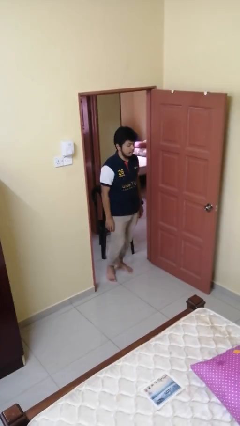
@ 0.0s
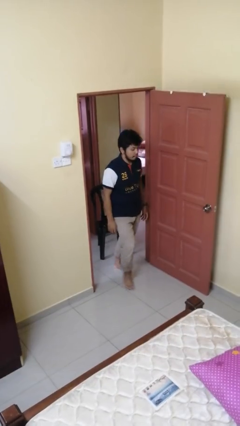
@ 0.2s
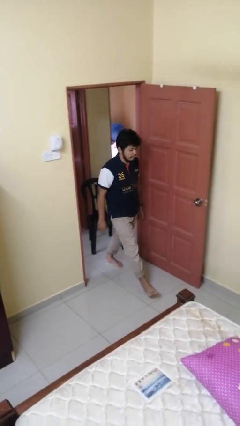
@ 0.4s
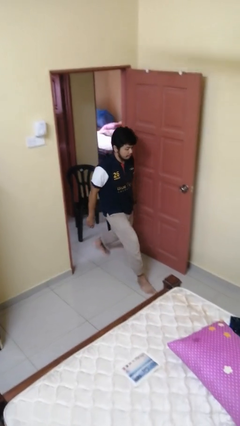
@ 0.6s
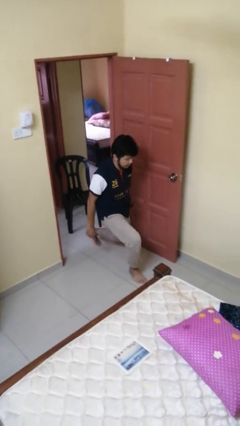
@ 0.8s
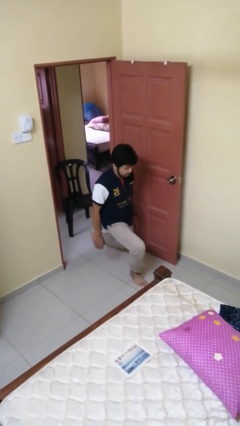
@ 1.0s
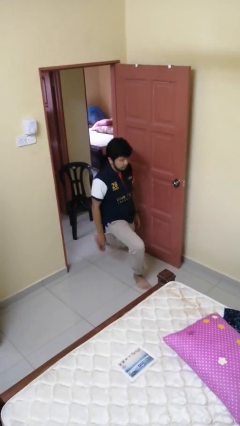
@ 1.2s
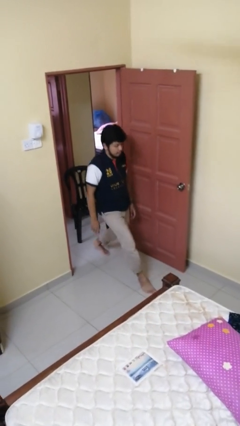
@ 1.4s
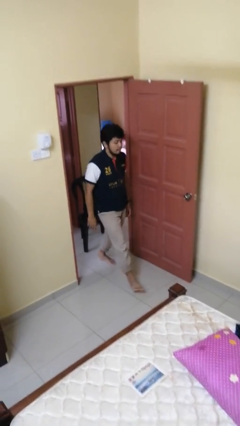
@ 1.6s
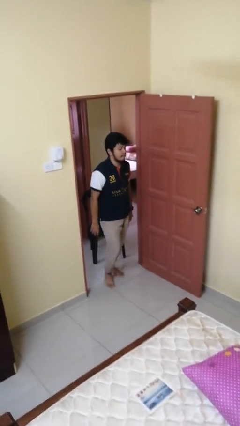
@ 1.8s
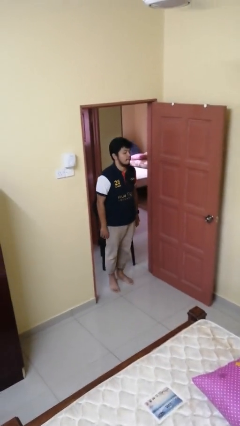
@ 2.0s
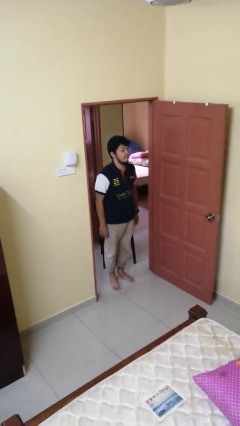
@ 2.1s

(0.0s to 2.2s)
person exercises with lunges

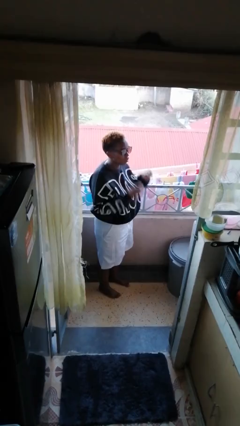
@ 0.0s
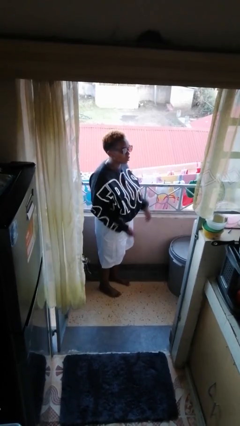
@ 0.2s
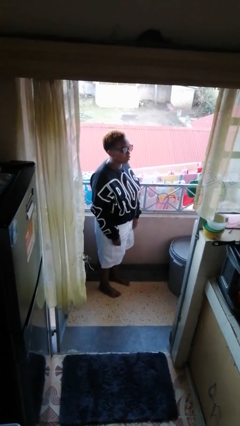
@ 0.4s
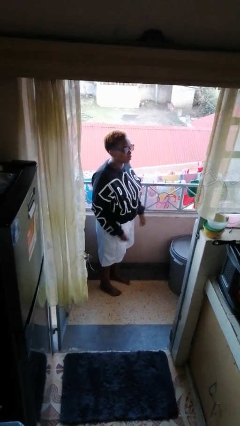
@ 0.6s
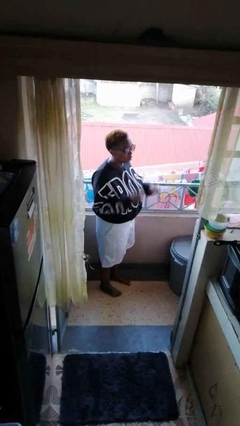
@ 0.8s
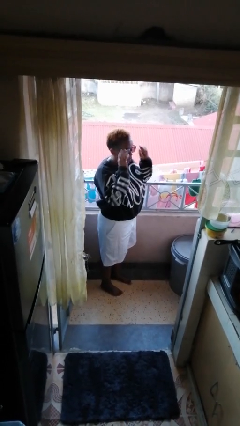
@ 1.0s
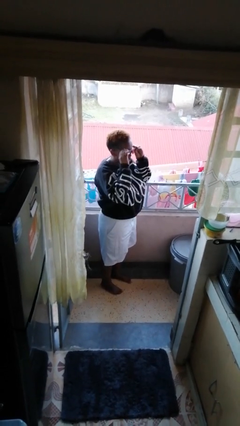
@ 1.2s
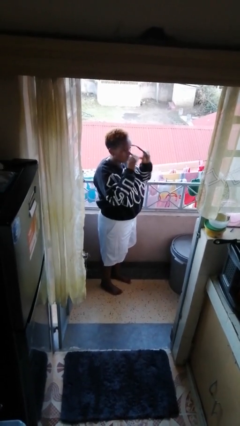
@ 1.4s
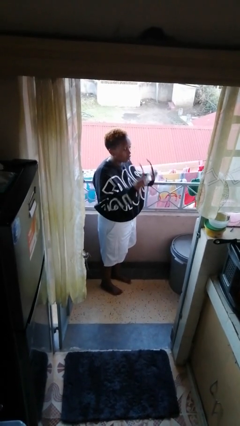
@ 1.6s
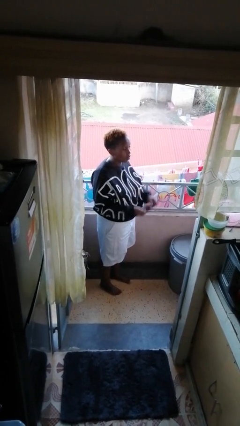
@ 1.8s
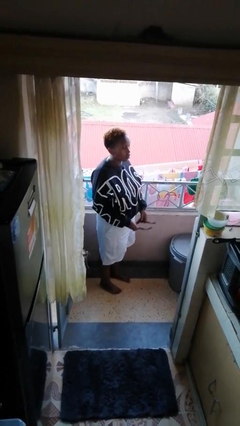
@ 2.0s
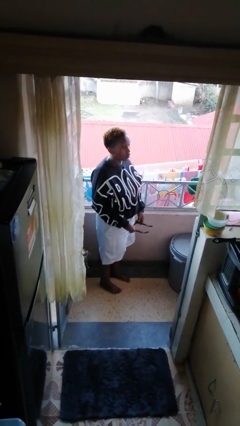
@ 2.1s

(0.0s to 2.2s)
person takes off sunglasses

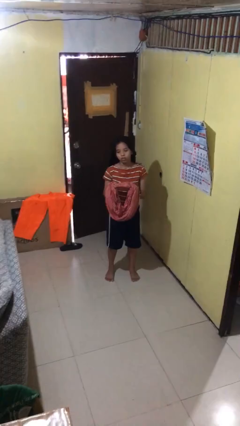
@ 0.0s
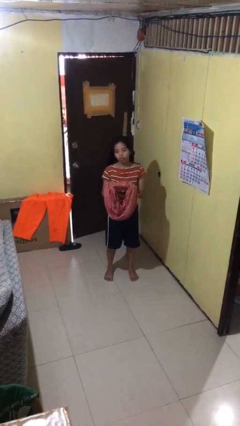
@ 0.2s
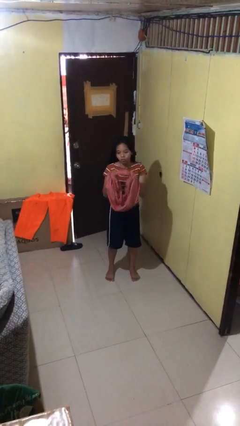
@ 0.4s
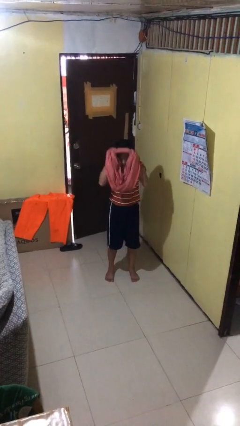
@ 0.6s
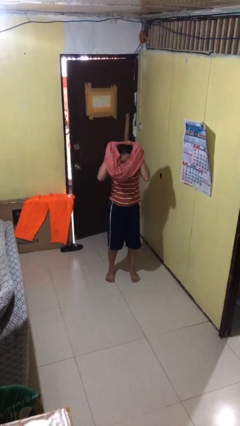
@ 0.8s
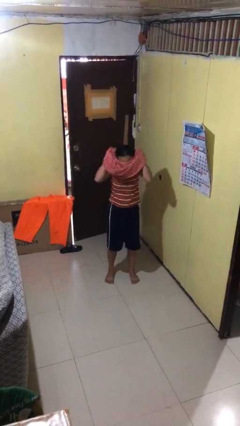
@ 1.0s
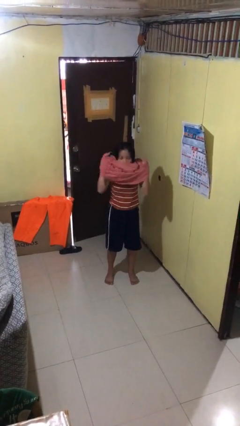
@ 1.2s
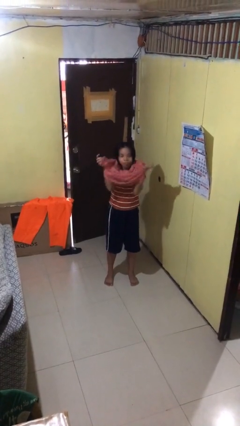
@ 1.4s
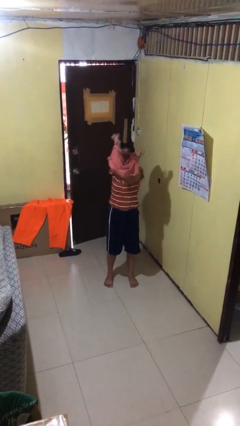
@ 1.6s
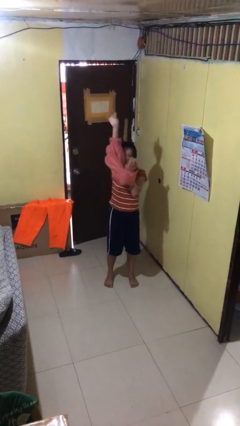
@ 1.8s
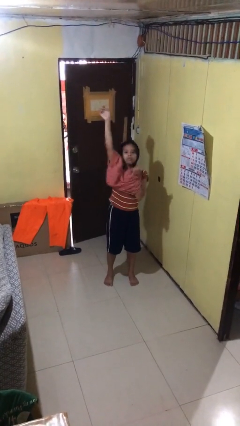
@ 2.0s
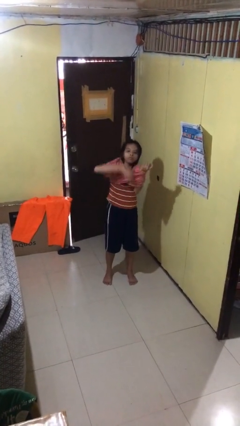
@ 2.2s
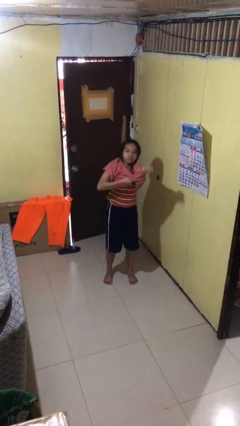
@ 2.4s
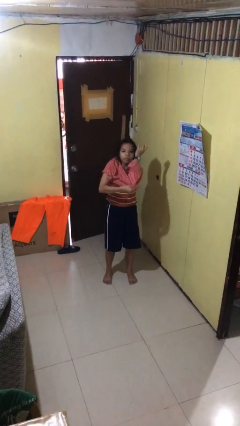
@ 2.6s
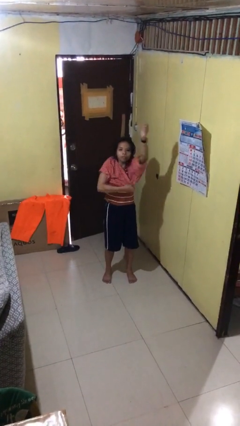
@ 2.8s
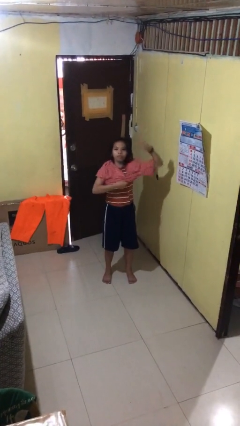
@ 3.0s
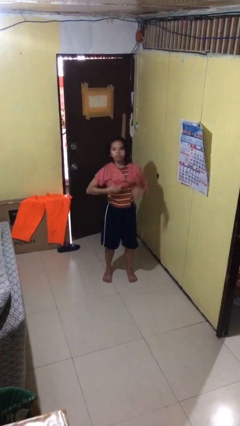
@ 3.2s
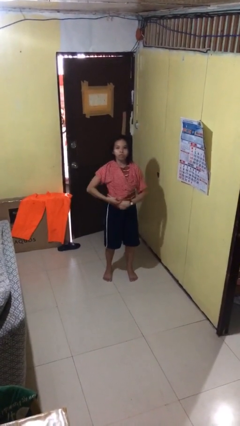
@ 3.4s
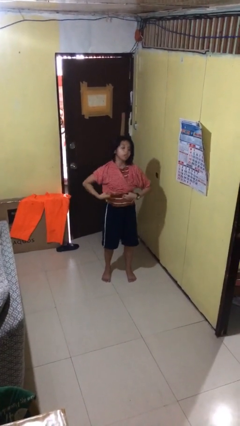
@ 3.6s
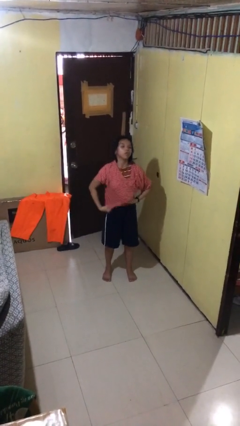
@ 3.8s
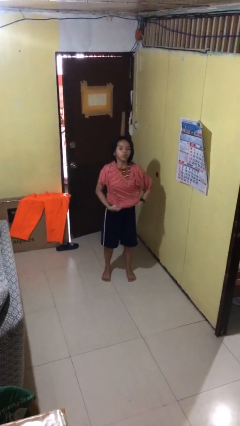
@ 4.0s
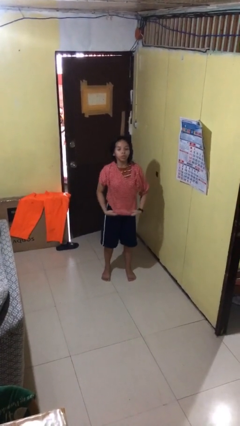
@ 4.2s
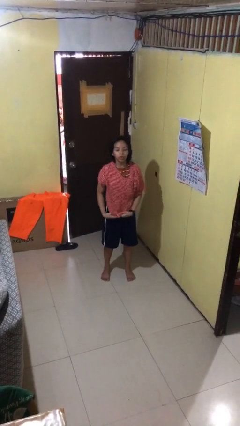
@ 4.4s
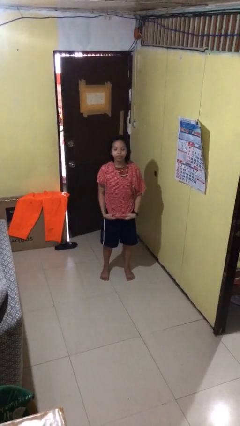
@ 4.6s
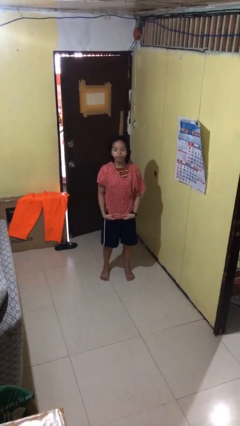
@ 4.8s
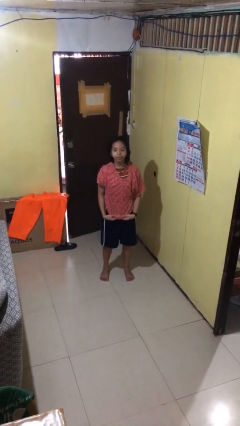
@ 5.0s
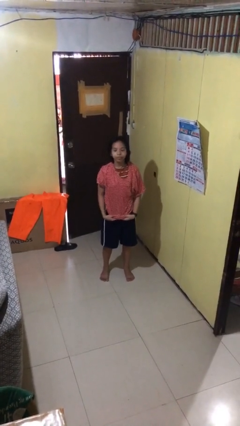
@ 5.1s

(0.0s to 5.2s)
person puts on shirt

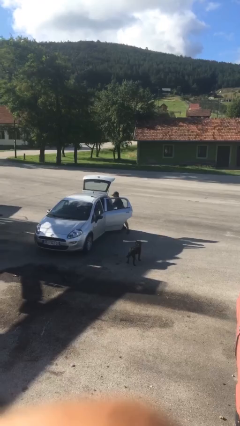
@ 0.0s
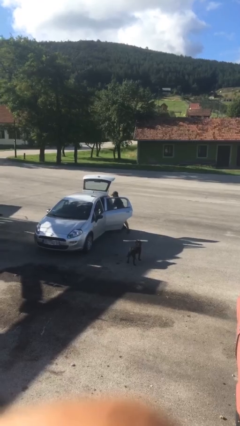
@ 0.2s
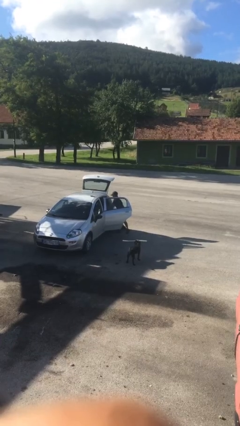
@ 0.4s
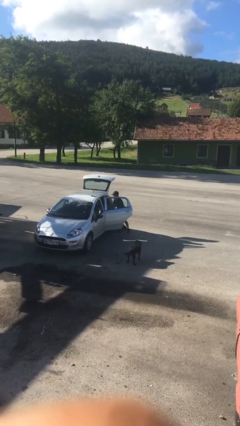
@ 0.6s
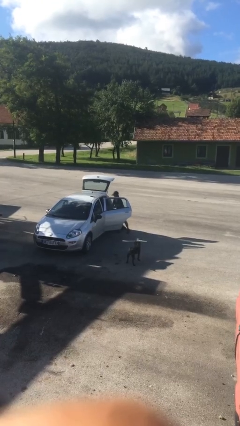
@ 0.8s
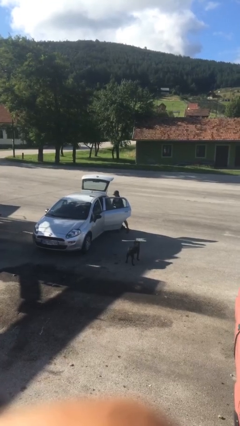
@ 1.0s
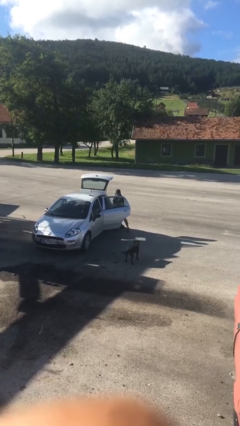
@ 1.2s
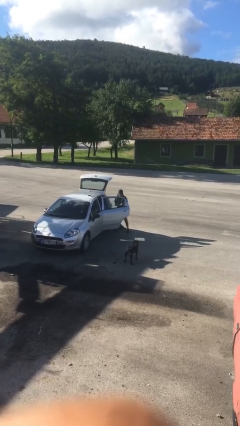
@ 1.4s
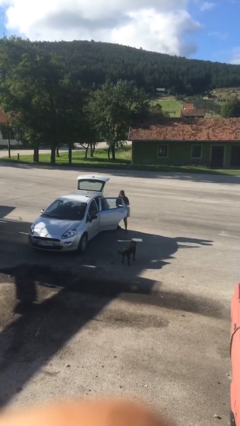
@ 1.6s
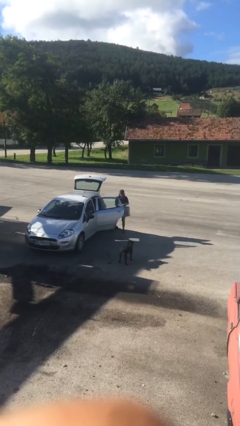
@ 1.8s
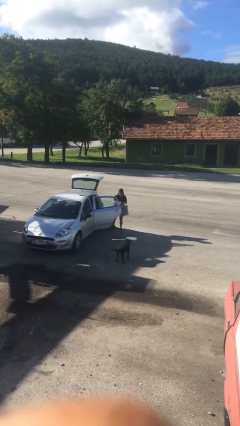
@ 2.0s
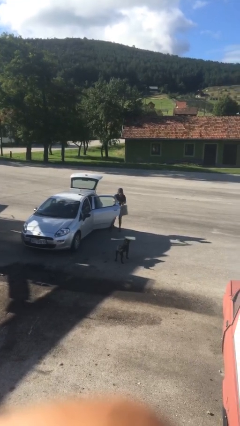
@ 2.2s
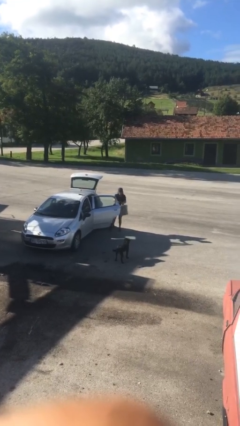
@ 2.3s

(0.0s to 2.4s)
person closes car door

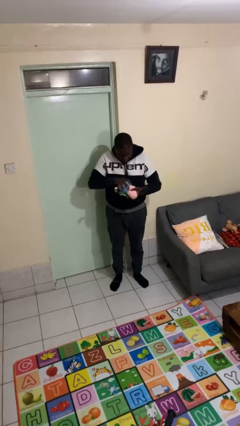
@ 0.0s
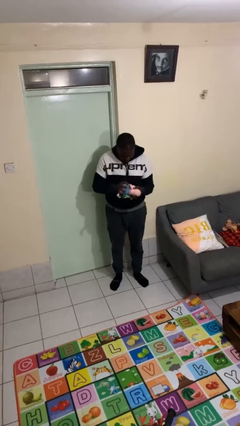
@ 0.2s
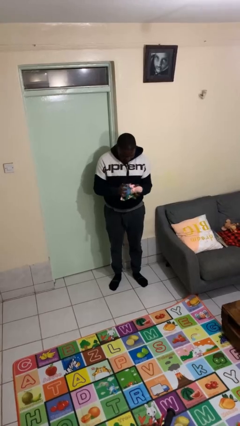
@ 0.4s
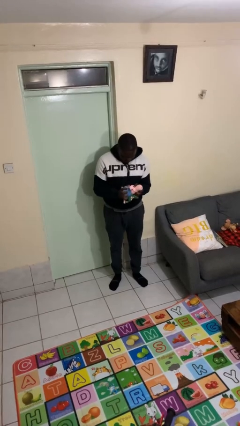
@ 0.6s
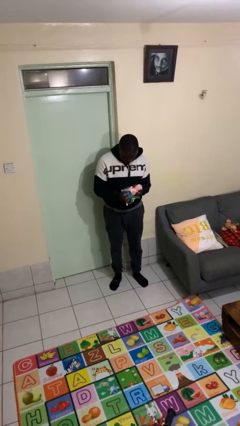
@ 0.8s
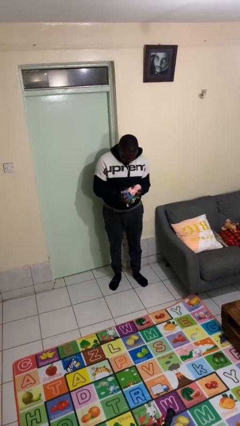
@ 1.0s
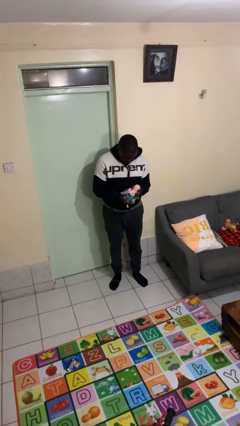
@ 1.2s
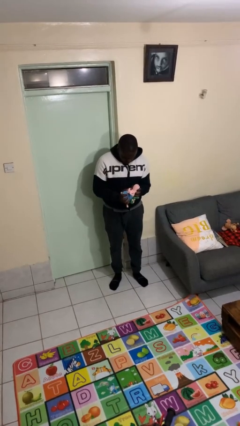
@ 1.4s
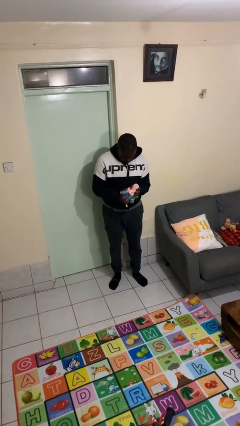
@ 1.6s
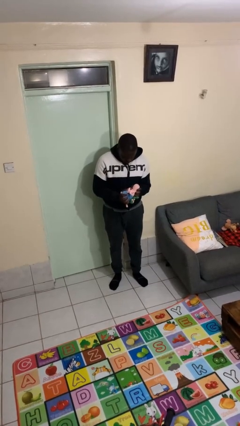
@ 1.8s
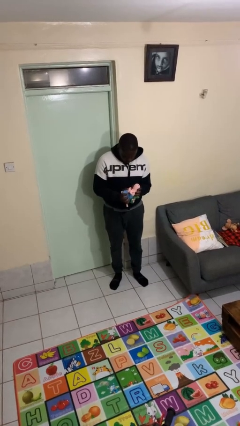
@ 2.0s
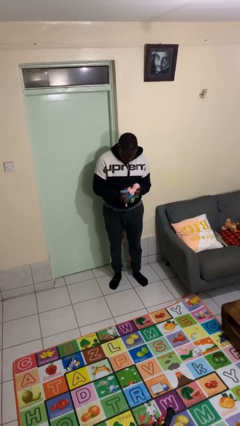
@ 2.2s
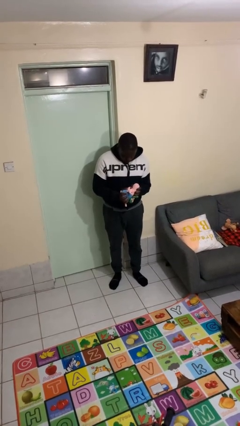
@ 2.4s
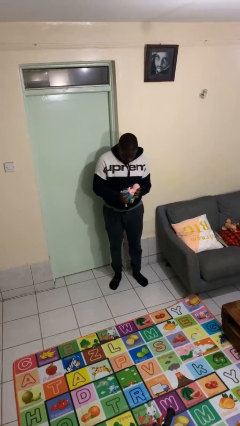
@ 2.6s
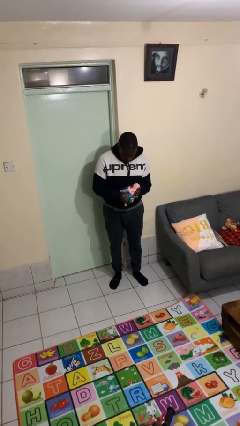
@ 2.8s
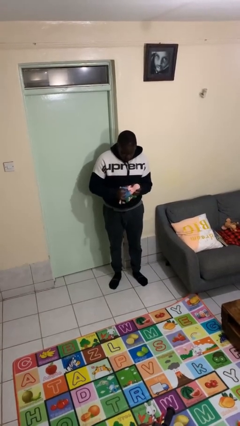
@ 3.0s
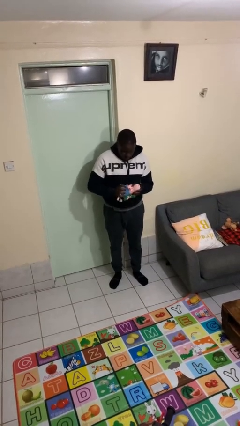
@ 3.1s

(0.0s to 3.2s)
person squeezes object

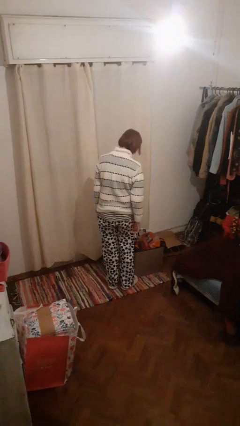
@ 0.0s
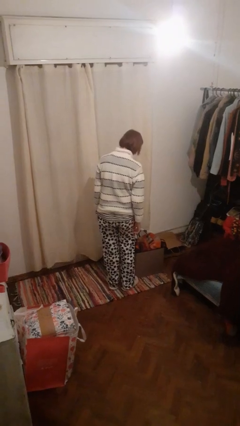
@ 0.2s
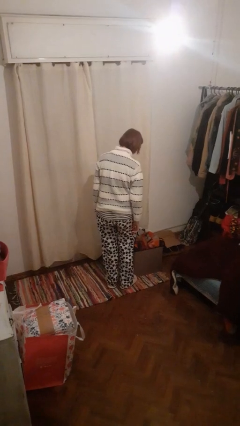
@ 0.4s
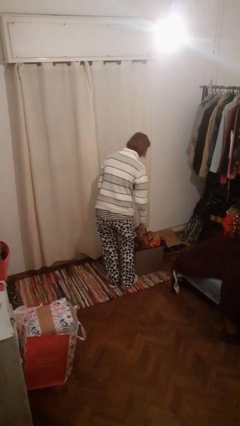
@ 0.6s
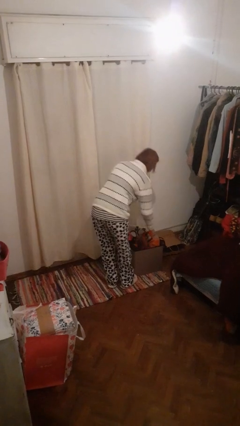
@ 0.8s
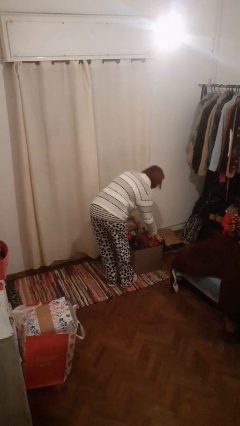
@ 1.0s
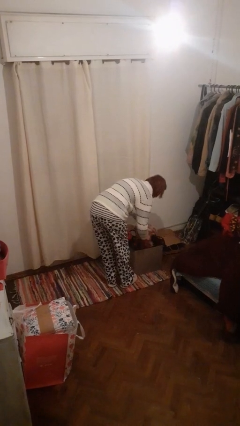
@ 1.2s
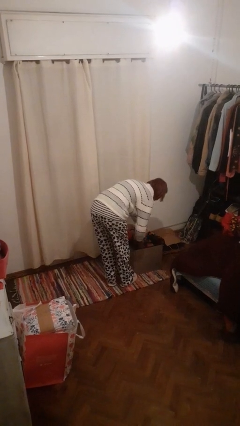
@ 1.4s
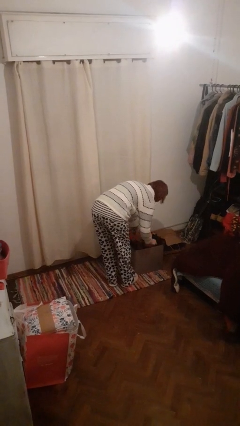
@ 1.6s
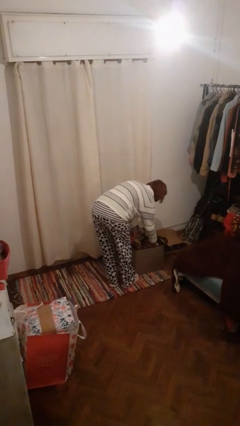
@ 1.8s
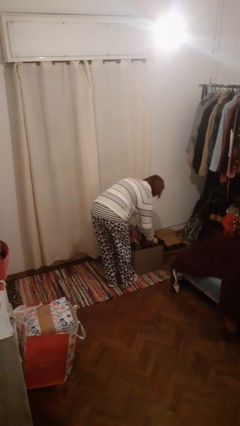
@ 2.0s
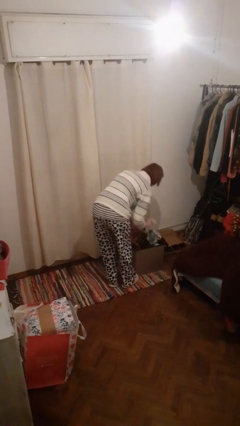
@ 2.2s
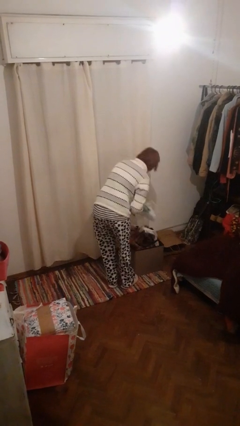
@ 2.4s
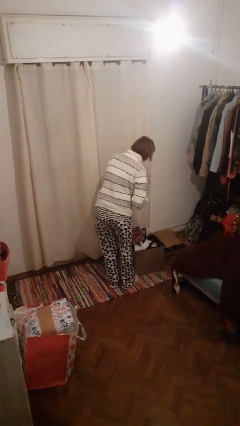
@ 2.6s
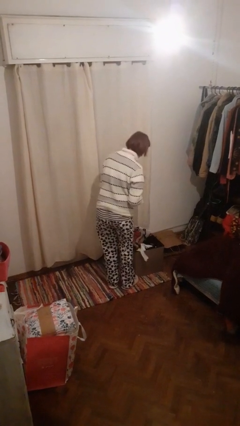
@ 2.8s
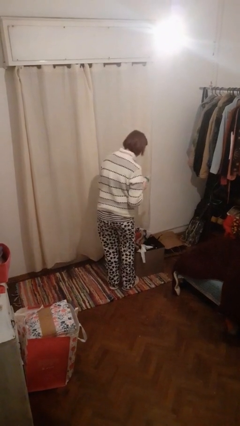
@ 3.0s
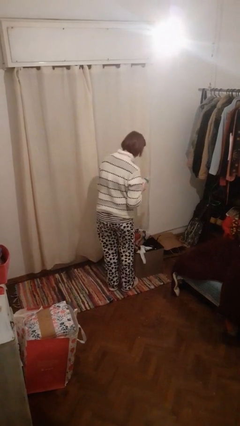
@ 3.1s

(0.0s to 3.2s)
person takes object from basket
